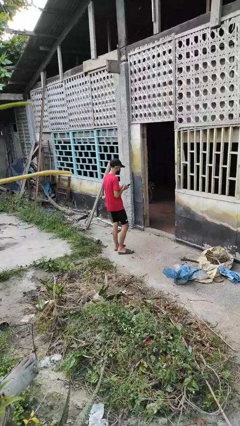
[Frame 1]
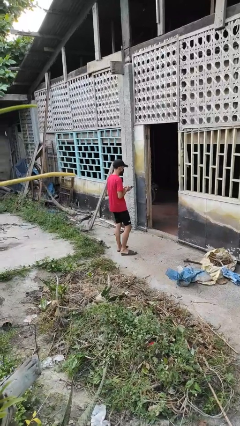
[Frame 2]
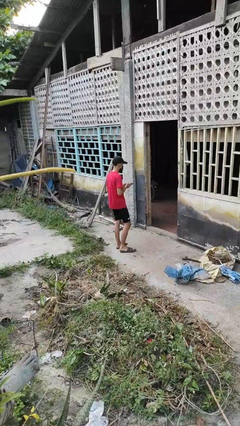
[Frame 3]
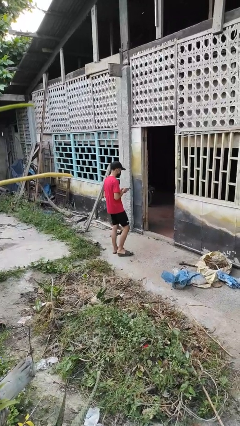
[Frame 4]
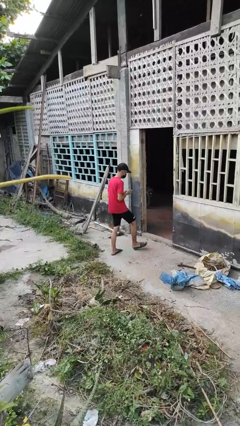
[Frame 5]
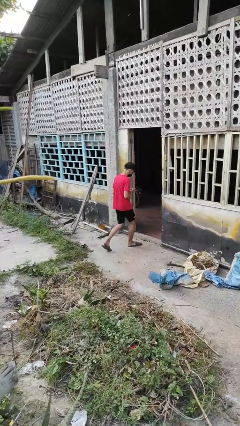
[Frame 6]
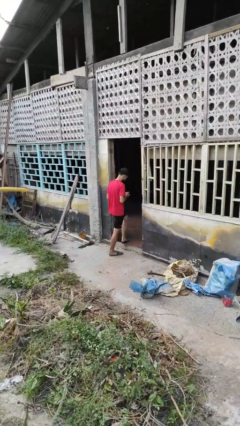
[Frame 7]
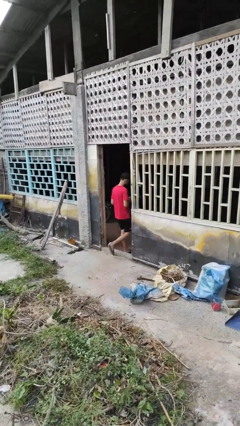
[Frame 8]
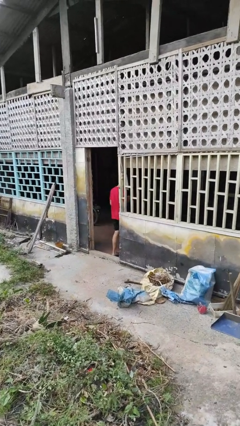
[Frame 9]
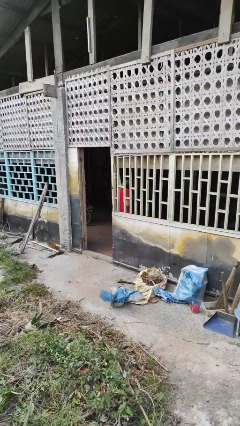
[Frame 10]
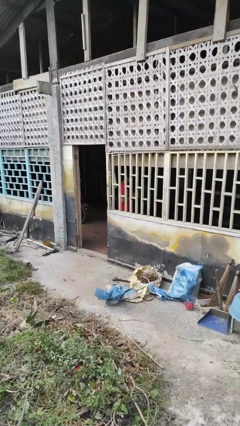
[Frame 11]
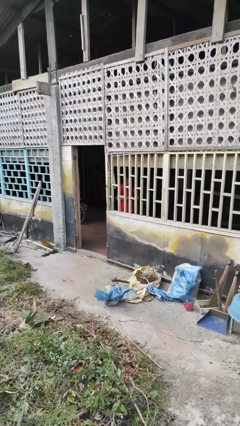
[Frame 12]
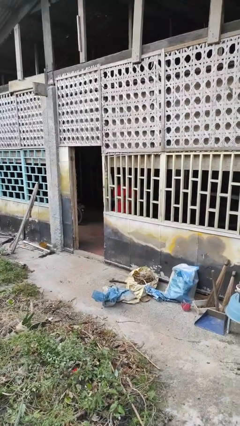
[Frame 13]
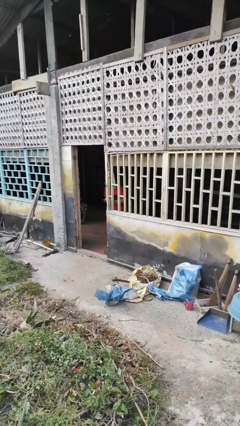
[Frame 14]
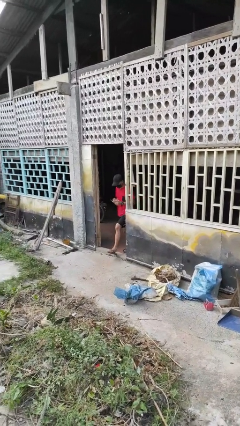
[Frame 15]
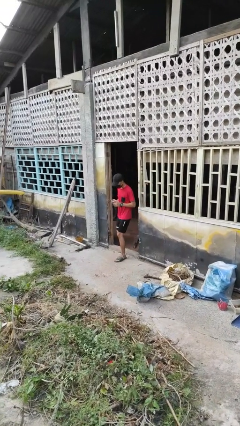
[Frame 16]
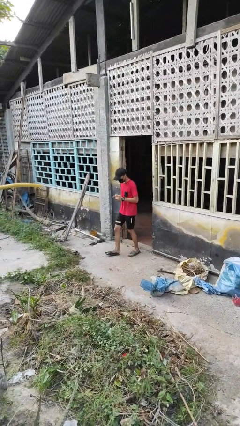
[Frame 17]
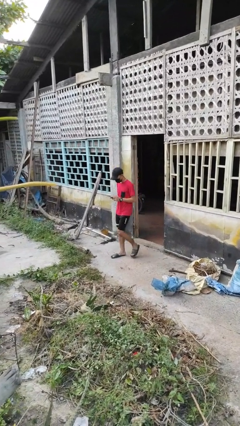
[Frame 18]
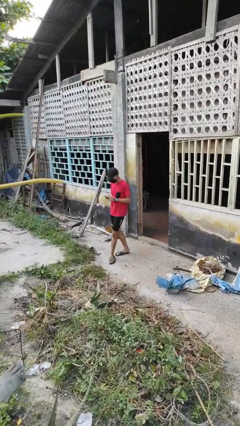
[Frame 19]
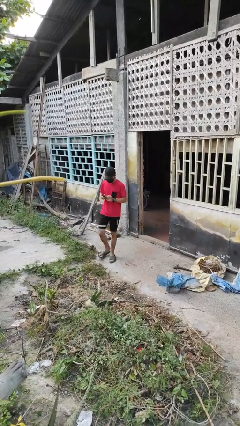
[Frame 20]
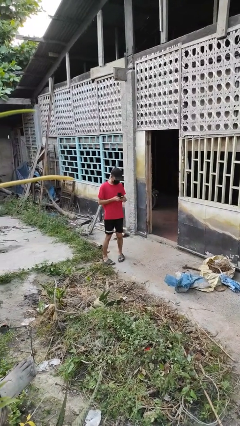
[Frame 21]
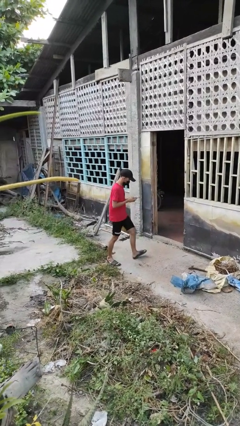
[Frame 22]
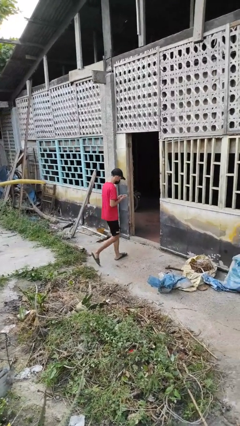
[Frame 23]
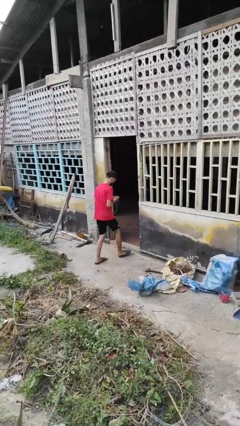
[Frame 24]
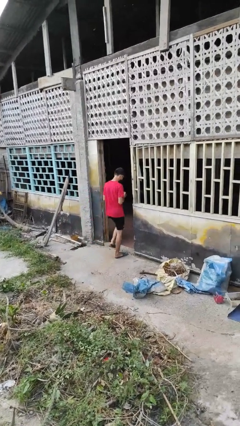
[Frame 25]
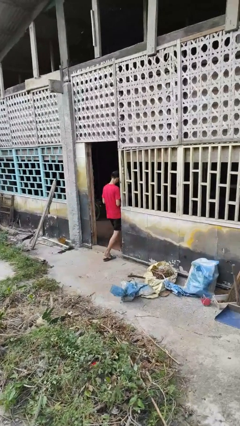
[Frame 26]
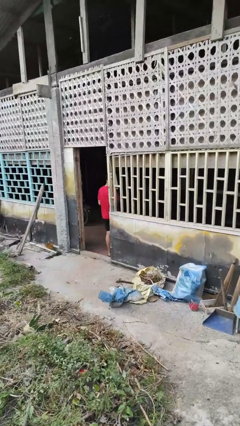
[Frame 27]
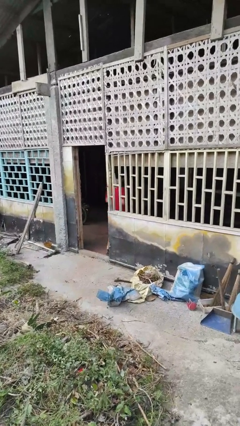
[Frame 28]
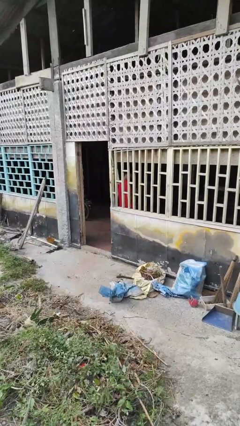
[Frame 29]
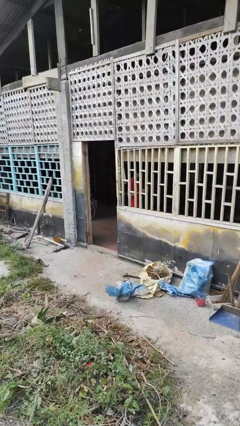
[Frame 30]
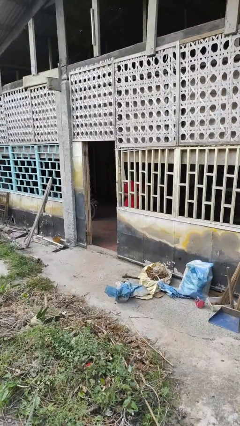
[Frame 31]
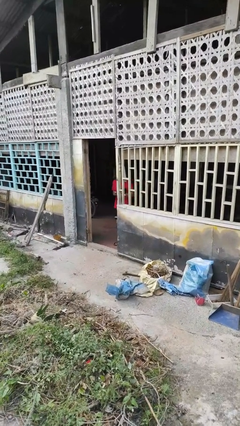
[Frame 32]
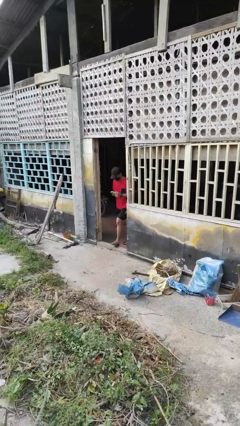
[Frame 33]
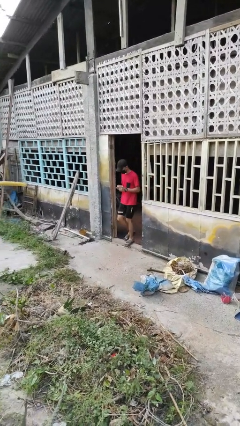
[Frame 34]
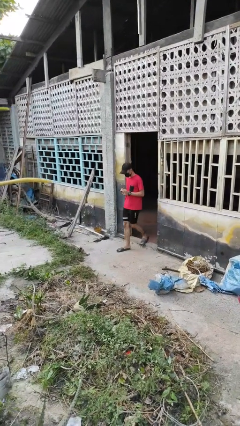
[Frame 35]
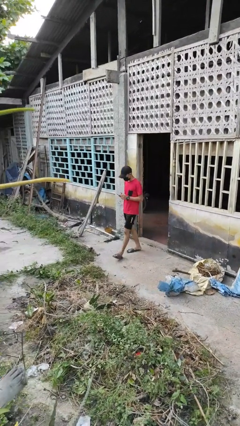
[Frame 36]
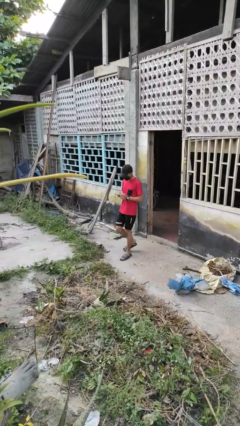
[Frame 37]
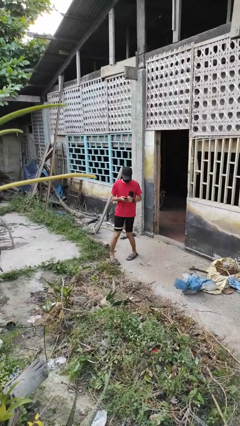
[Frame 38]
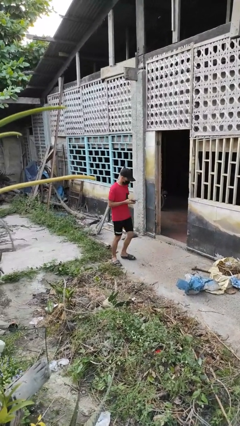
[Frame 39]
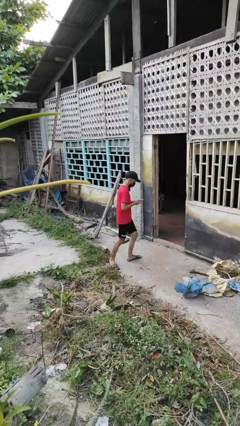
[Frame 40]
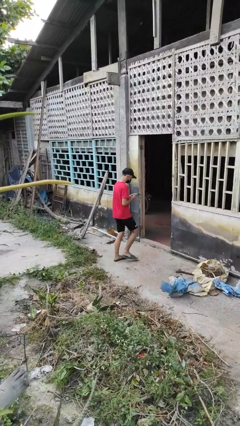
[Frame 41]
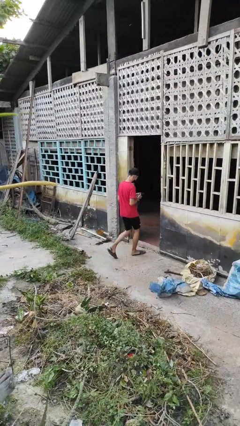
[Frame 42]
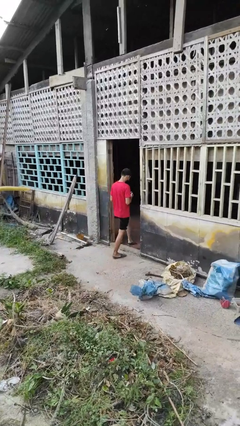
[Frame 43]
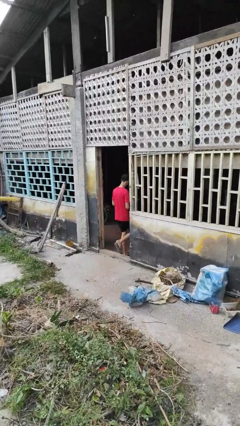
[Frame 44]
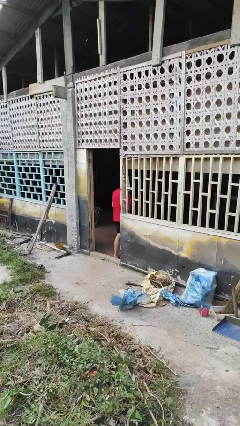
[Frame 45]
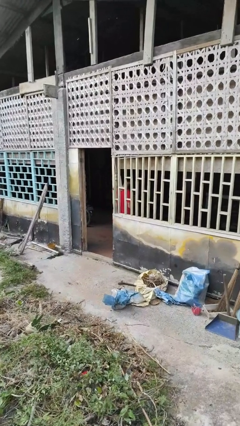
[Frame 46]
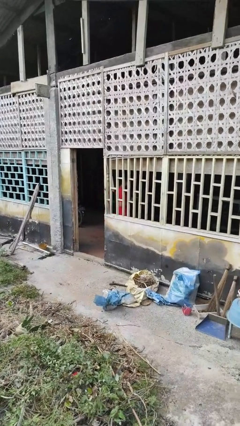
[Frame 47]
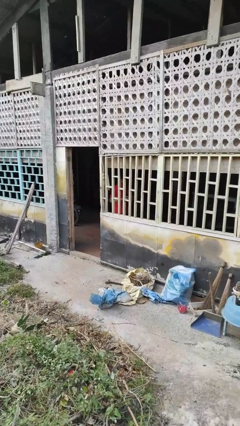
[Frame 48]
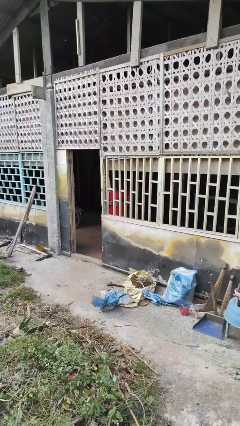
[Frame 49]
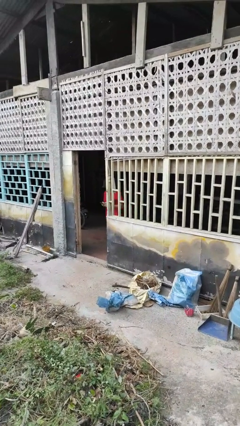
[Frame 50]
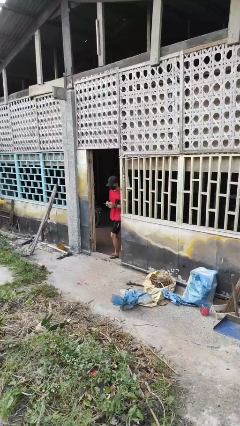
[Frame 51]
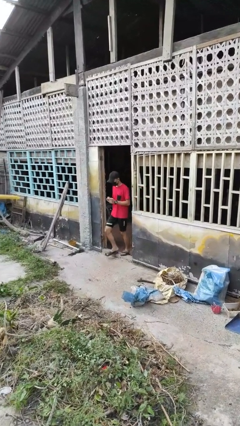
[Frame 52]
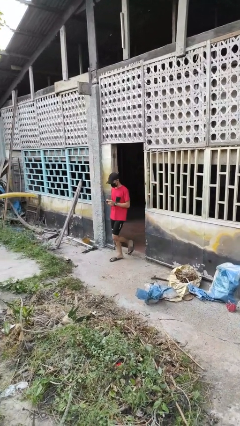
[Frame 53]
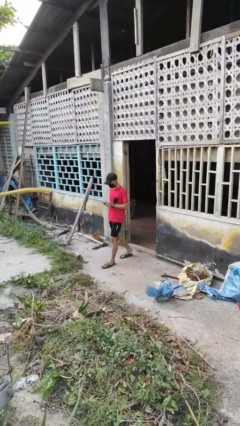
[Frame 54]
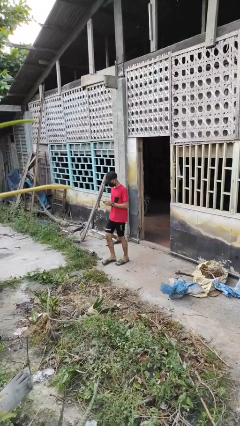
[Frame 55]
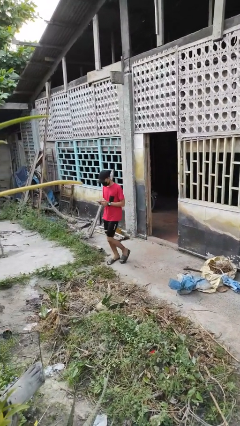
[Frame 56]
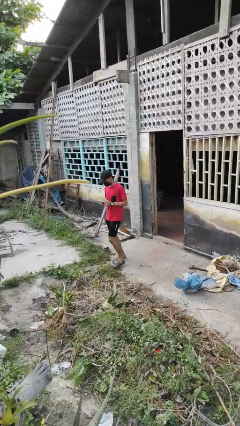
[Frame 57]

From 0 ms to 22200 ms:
person texts on phone

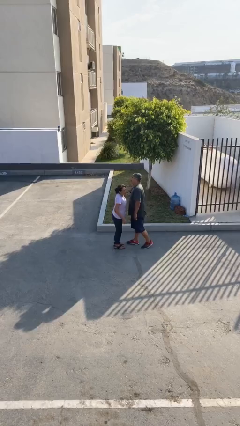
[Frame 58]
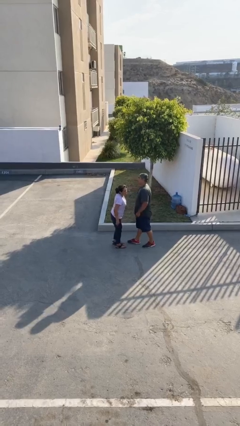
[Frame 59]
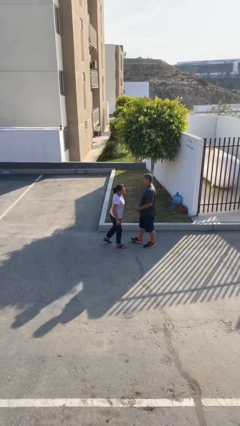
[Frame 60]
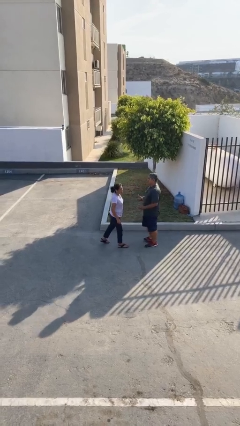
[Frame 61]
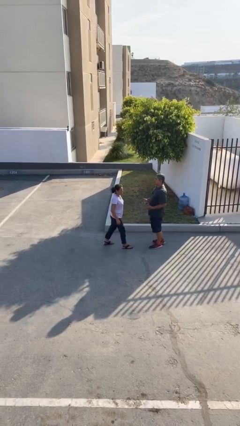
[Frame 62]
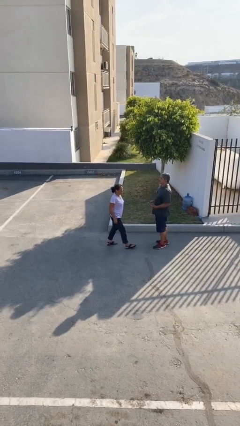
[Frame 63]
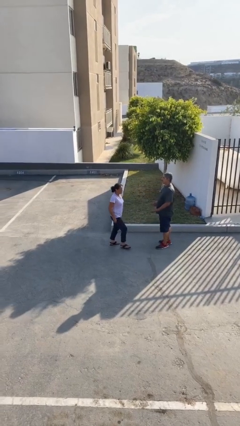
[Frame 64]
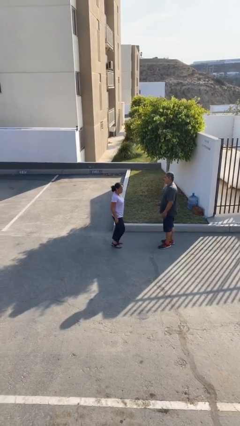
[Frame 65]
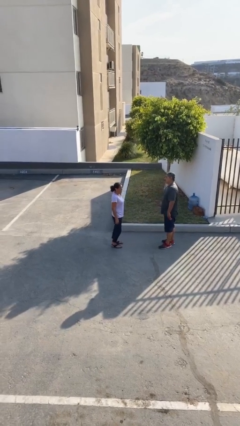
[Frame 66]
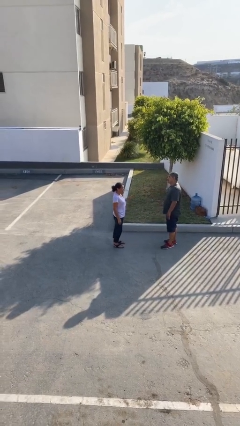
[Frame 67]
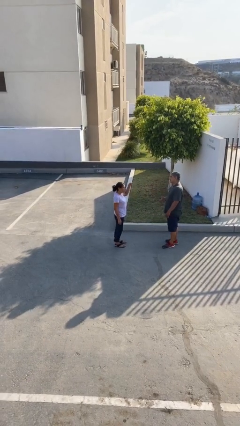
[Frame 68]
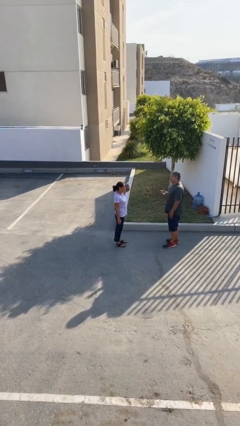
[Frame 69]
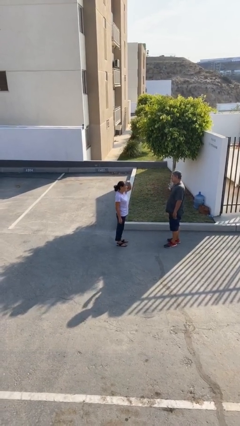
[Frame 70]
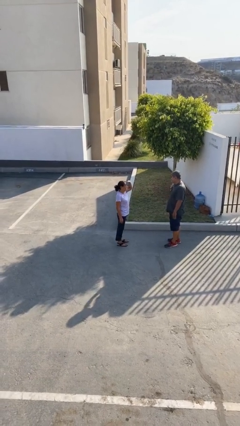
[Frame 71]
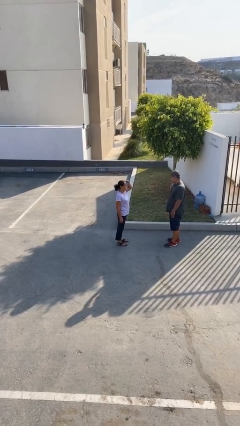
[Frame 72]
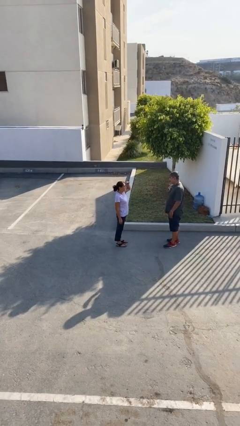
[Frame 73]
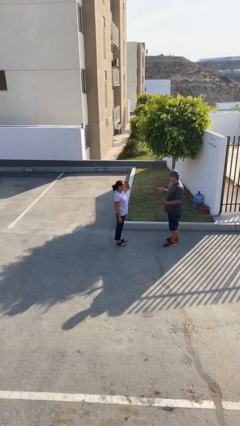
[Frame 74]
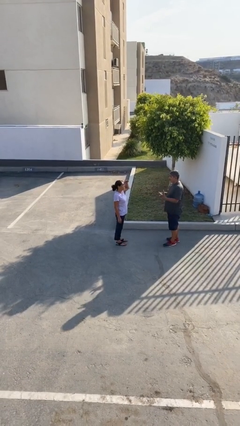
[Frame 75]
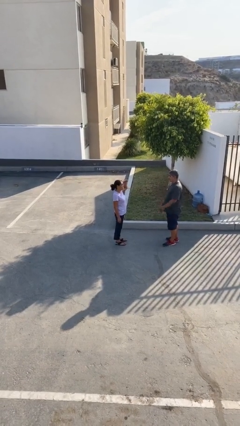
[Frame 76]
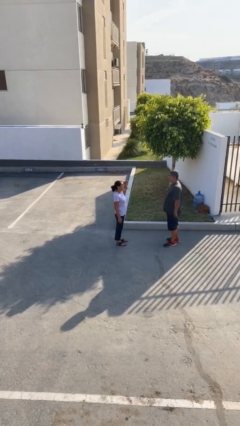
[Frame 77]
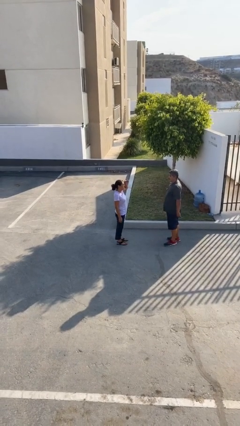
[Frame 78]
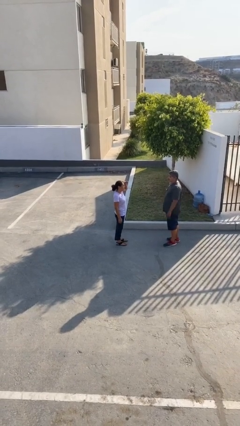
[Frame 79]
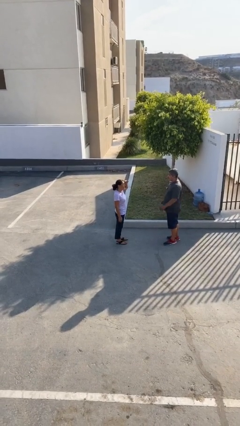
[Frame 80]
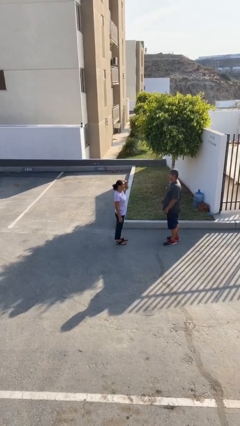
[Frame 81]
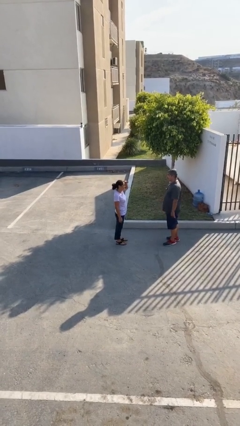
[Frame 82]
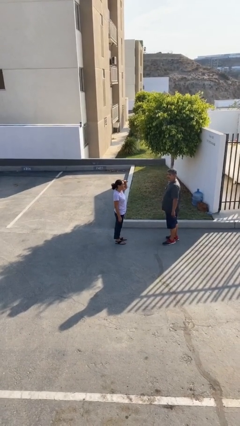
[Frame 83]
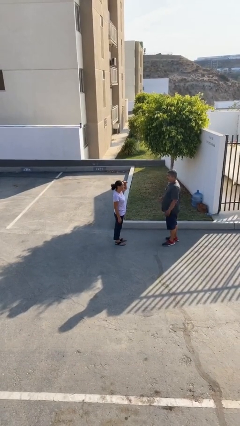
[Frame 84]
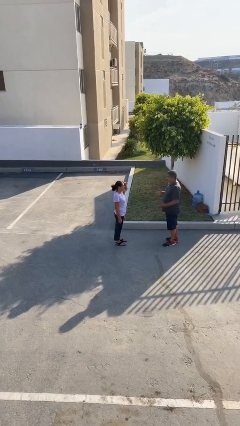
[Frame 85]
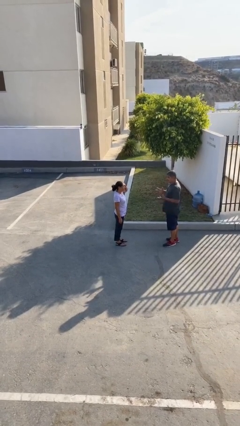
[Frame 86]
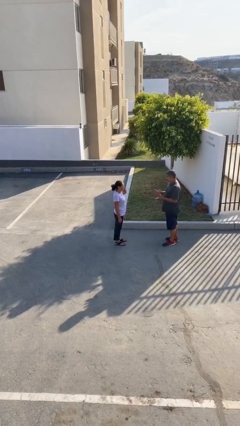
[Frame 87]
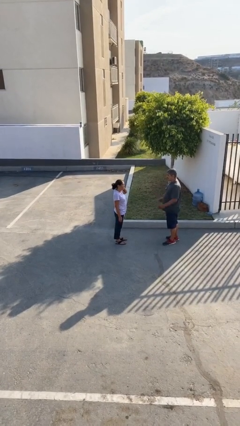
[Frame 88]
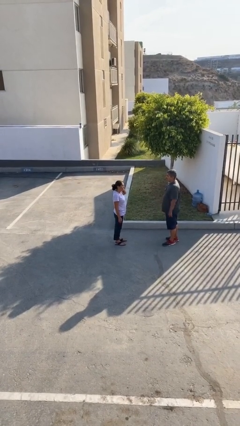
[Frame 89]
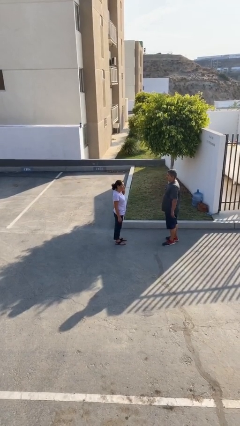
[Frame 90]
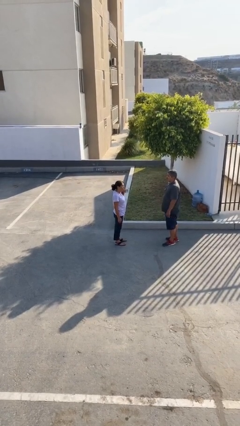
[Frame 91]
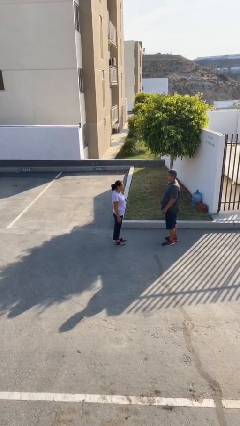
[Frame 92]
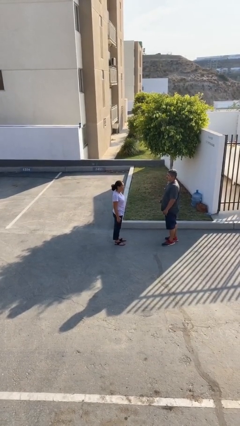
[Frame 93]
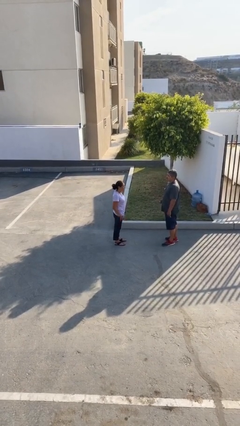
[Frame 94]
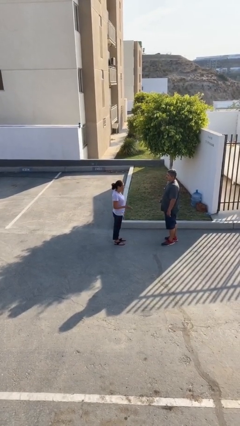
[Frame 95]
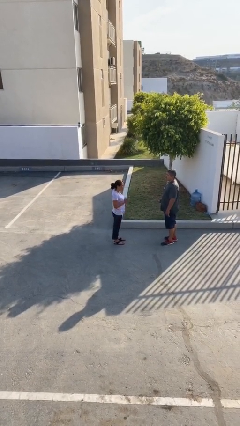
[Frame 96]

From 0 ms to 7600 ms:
person talks to person
